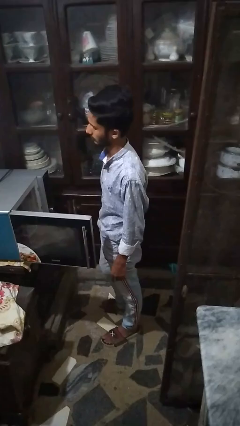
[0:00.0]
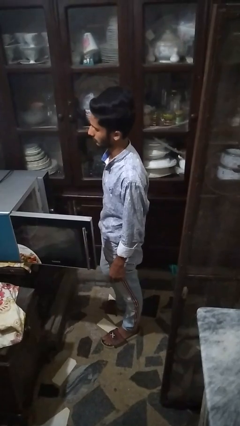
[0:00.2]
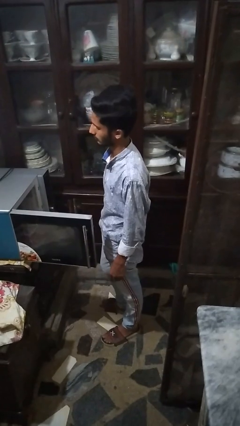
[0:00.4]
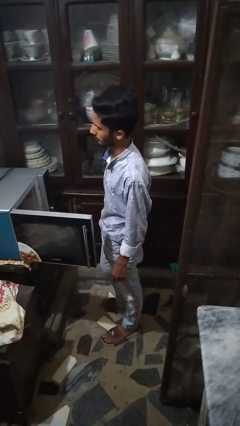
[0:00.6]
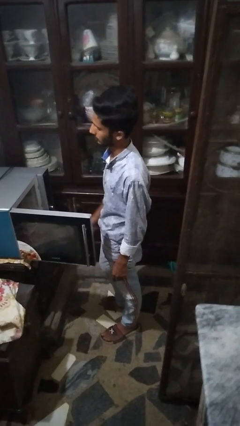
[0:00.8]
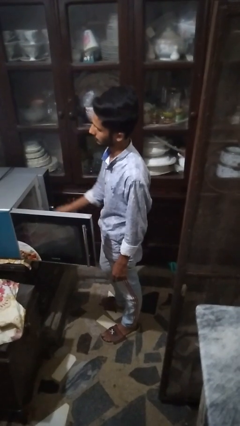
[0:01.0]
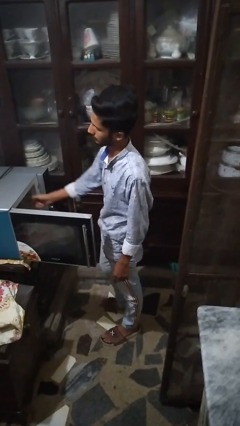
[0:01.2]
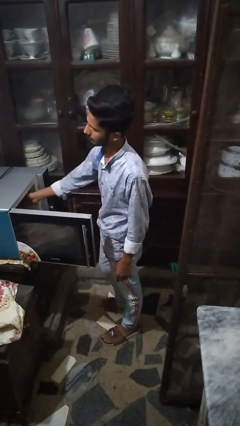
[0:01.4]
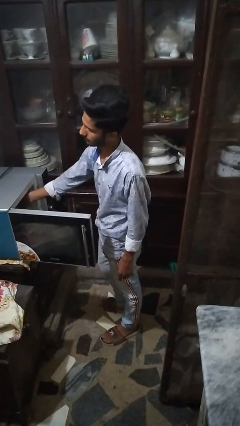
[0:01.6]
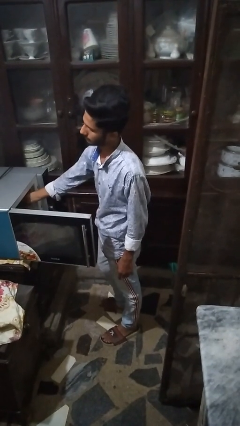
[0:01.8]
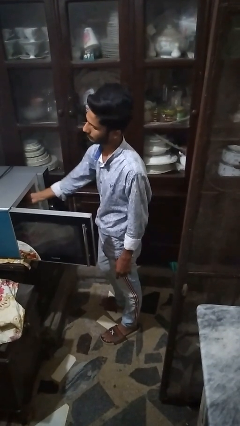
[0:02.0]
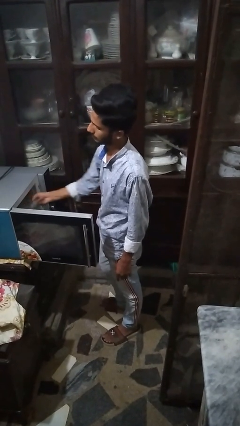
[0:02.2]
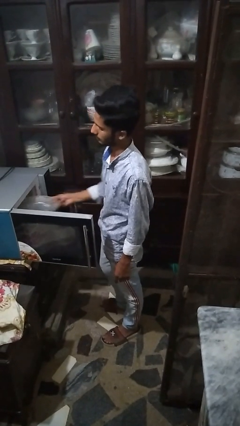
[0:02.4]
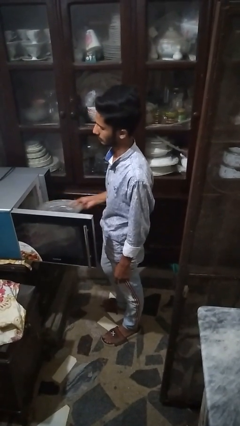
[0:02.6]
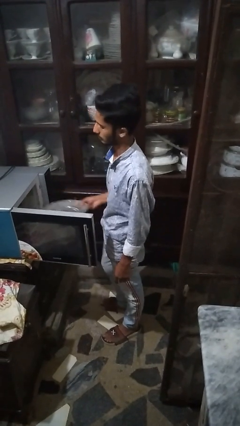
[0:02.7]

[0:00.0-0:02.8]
person takes object from microwave

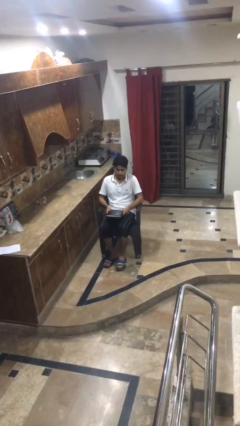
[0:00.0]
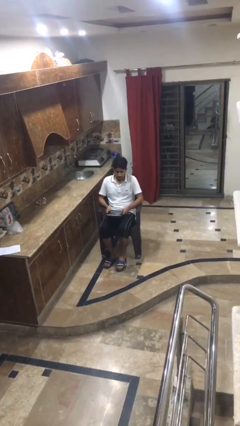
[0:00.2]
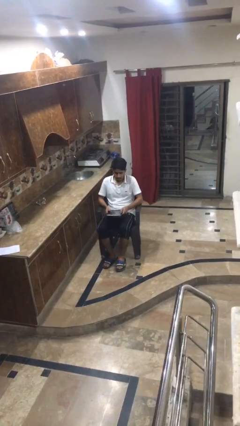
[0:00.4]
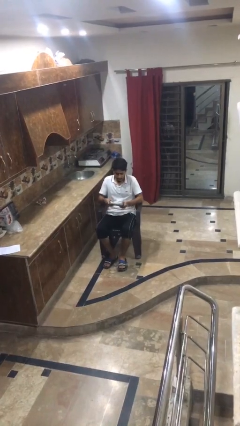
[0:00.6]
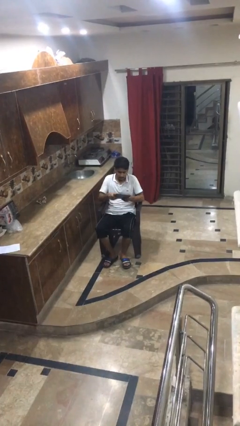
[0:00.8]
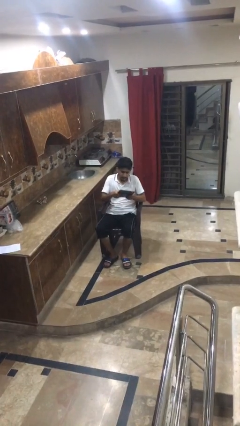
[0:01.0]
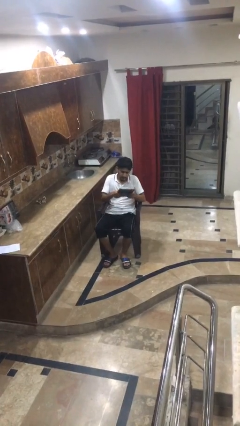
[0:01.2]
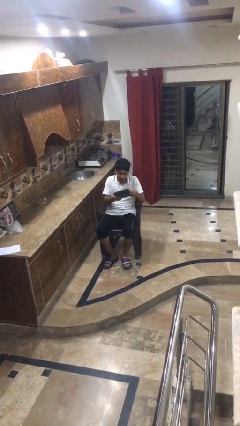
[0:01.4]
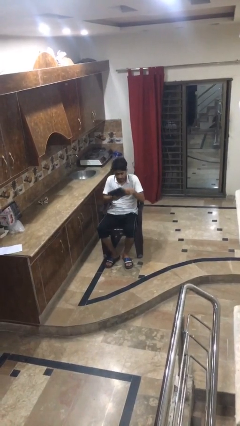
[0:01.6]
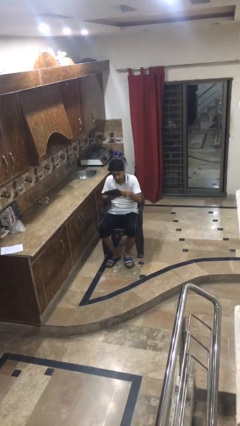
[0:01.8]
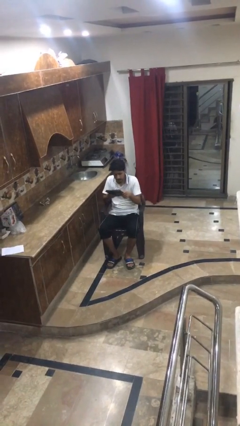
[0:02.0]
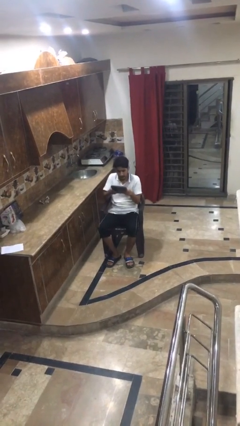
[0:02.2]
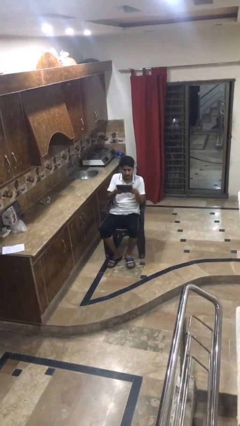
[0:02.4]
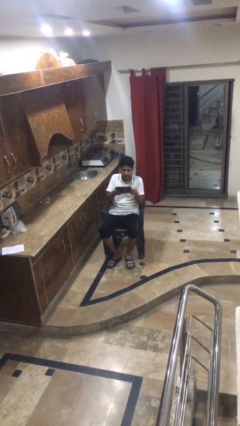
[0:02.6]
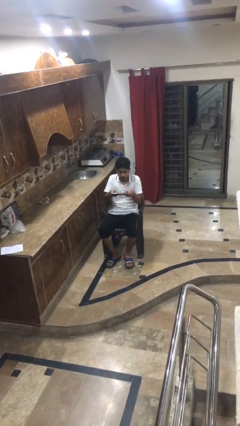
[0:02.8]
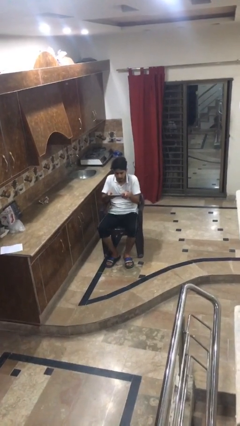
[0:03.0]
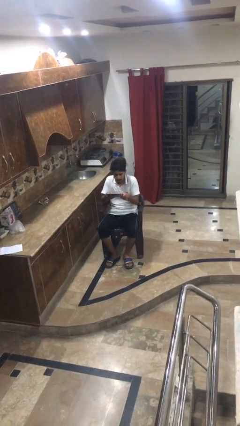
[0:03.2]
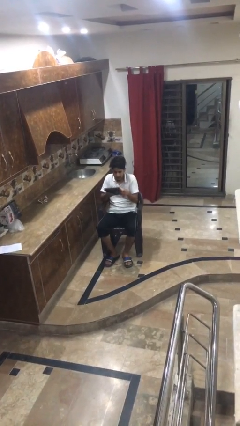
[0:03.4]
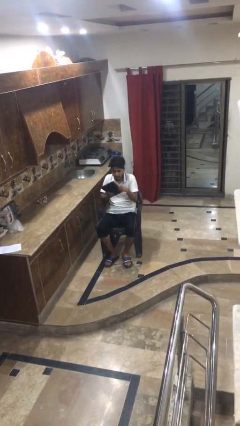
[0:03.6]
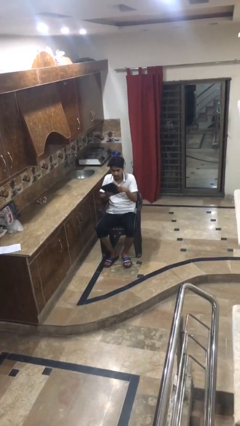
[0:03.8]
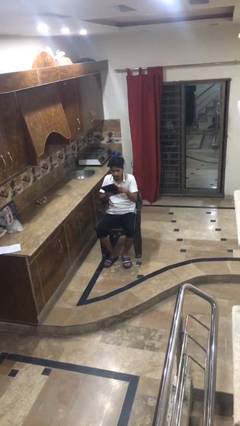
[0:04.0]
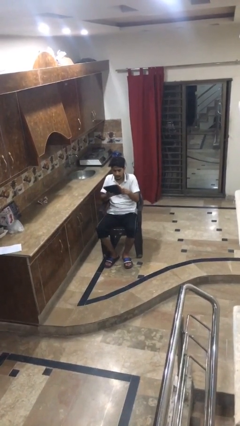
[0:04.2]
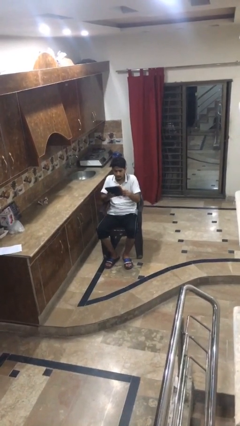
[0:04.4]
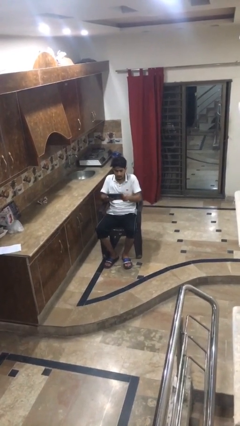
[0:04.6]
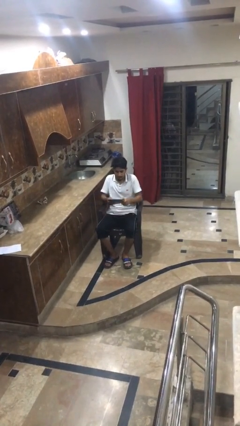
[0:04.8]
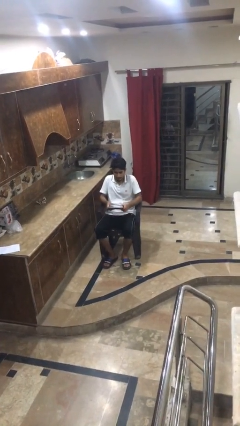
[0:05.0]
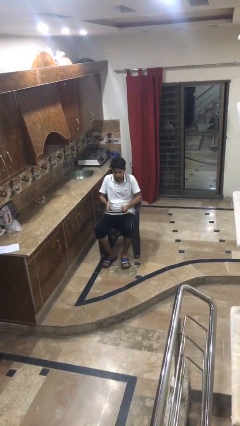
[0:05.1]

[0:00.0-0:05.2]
person interacts with handheld game

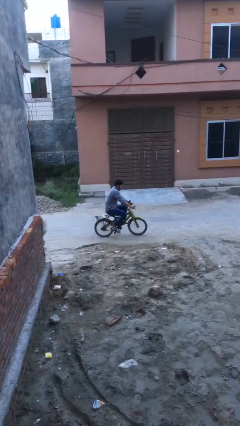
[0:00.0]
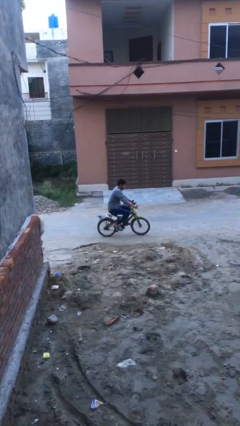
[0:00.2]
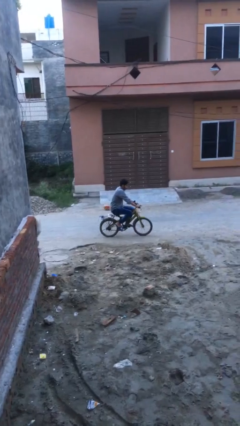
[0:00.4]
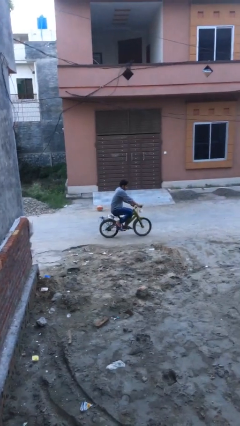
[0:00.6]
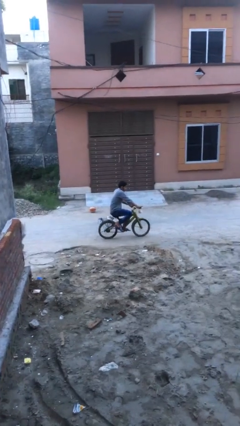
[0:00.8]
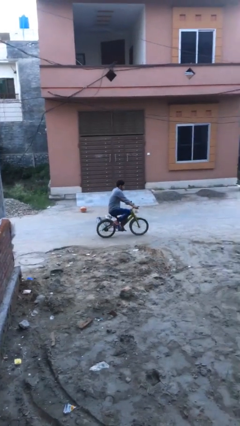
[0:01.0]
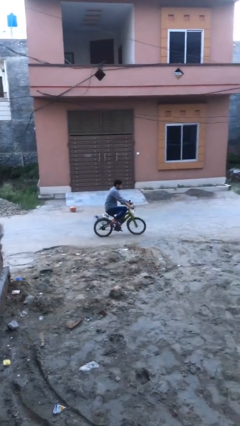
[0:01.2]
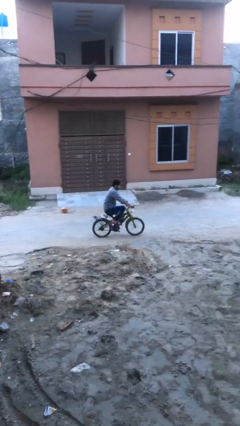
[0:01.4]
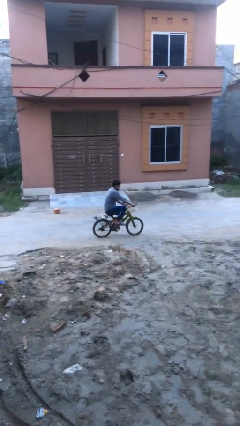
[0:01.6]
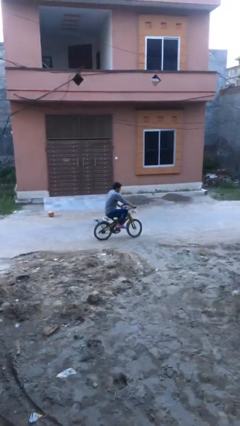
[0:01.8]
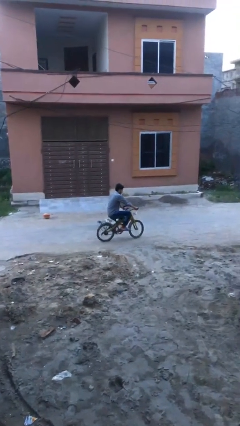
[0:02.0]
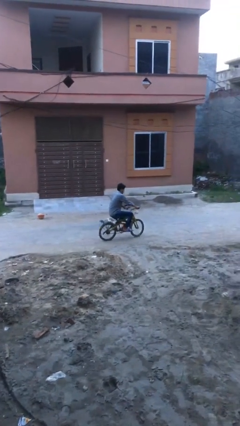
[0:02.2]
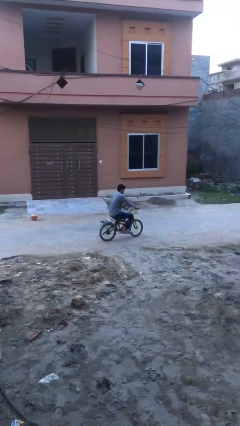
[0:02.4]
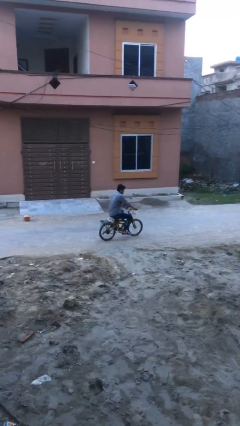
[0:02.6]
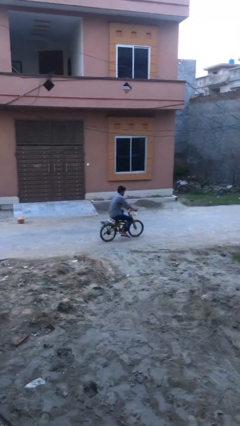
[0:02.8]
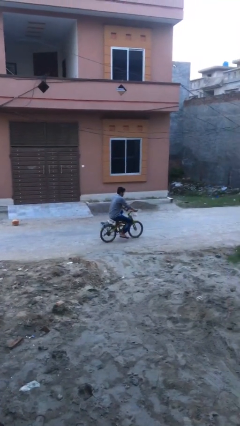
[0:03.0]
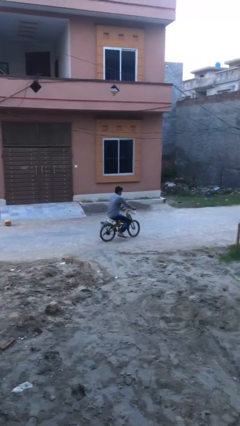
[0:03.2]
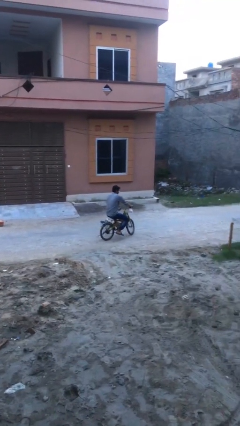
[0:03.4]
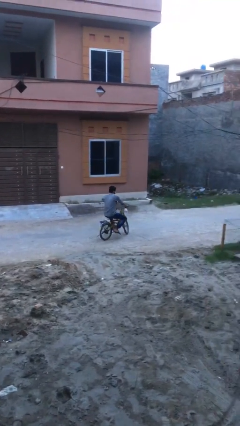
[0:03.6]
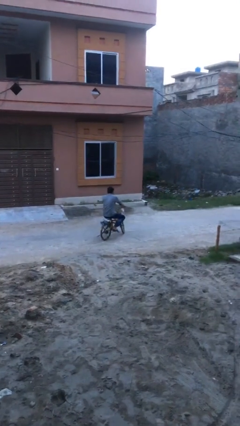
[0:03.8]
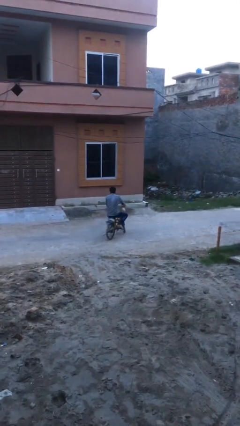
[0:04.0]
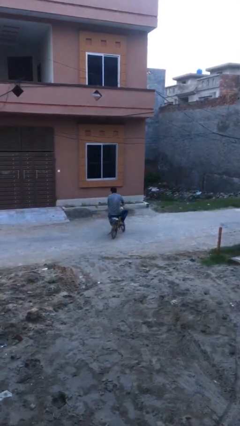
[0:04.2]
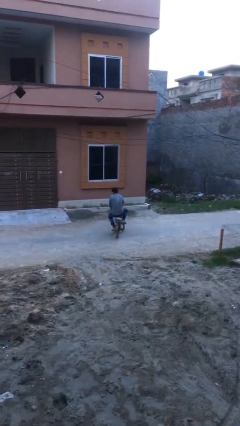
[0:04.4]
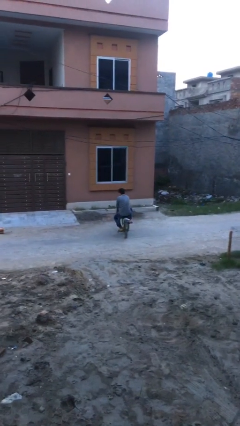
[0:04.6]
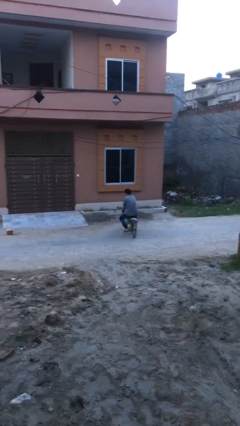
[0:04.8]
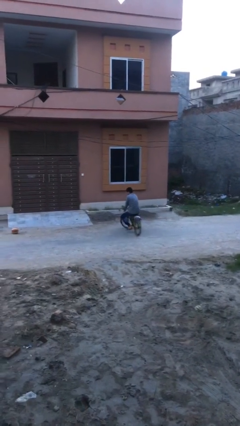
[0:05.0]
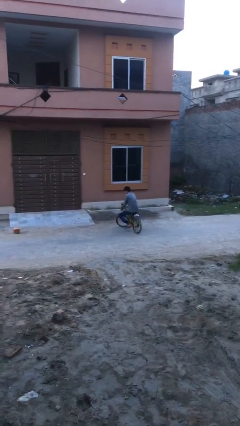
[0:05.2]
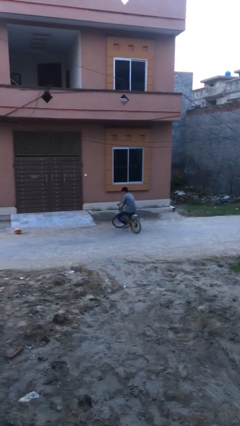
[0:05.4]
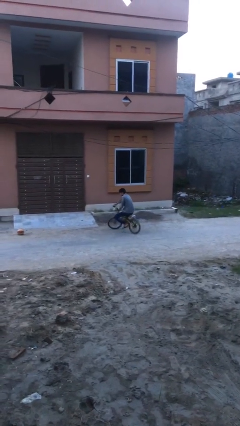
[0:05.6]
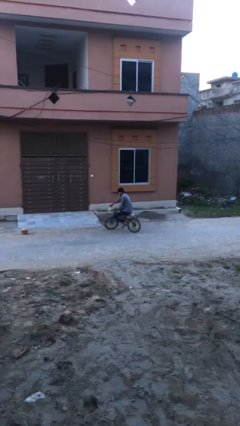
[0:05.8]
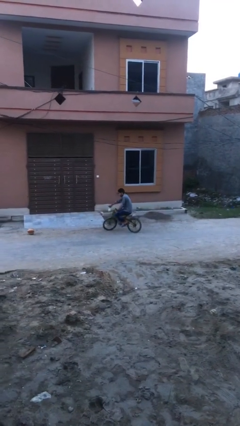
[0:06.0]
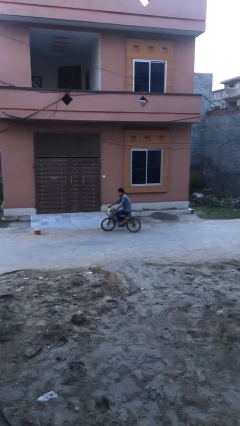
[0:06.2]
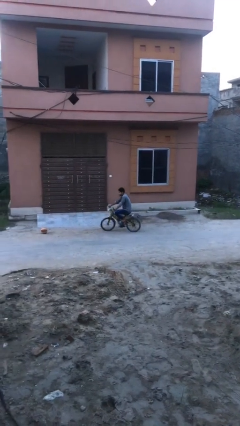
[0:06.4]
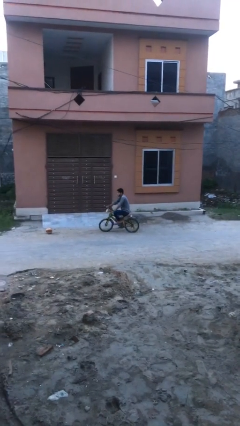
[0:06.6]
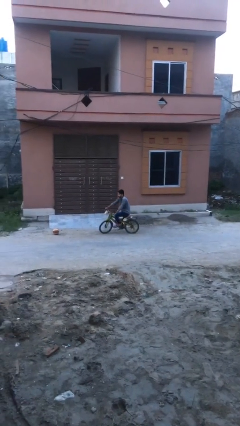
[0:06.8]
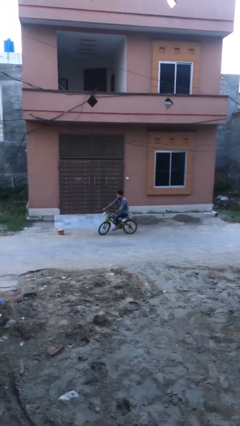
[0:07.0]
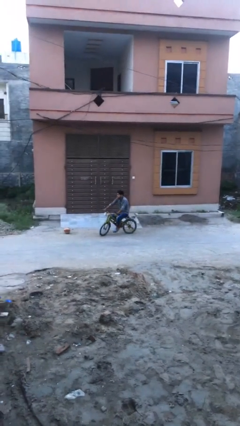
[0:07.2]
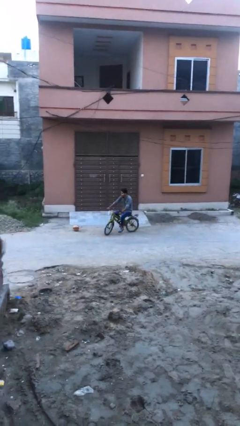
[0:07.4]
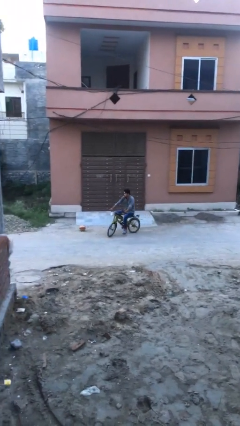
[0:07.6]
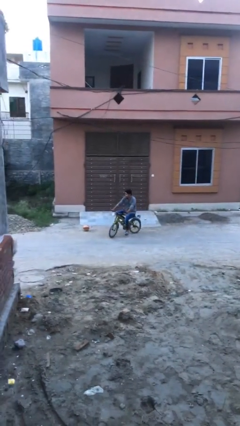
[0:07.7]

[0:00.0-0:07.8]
person rides bicycle

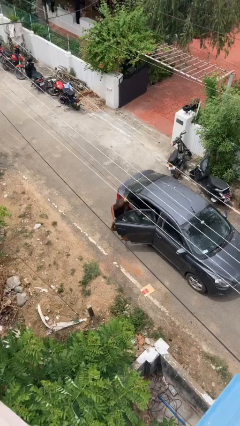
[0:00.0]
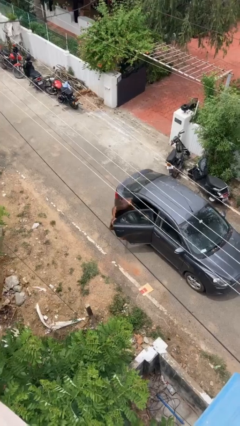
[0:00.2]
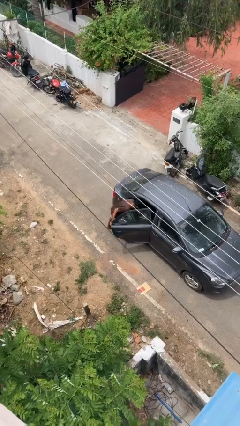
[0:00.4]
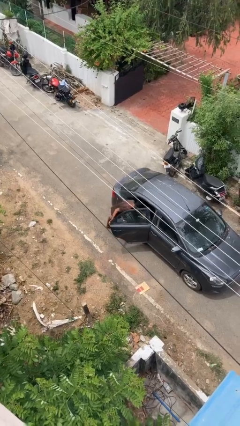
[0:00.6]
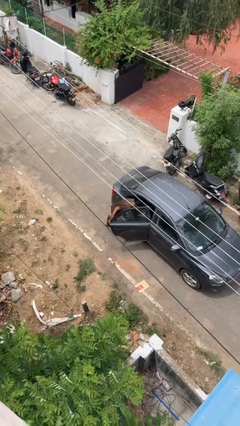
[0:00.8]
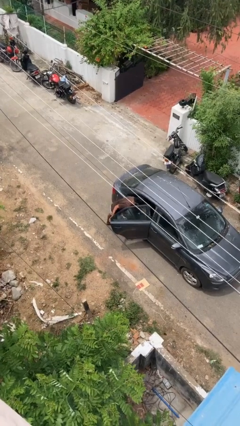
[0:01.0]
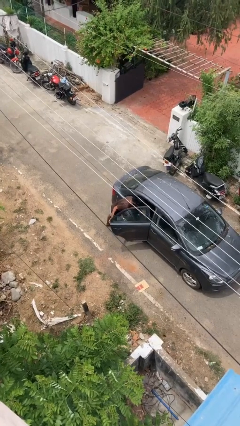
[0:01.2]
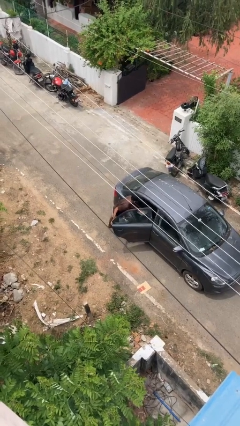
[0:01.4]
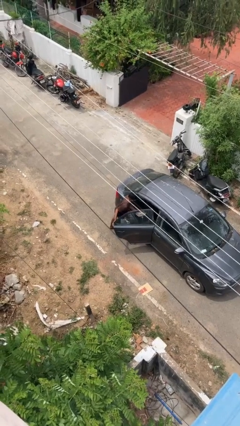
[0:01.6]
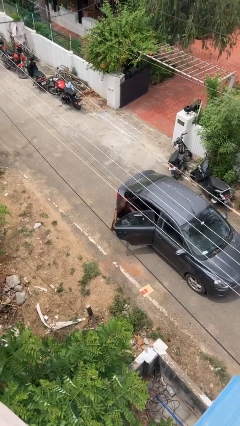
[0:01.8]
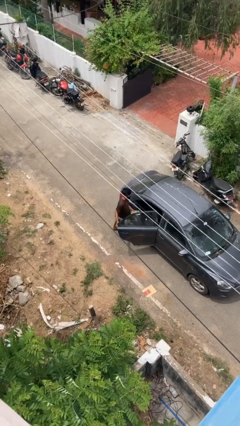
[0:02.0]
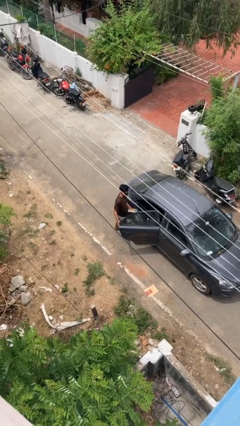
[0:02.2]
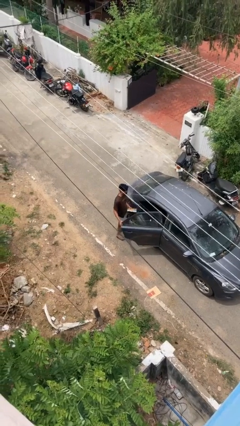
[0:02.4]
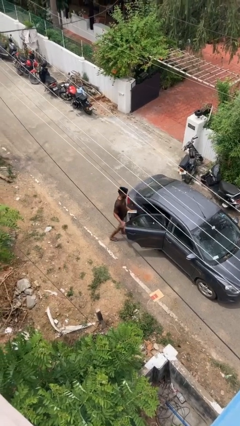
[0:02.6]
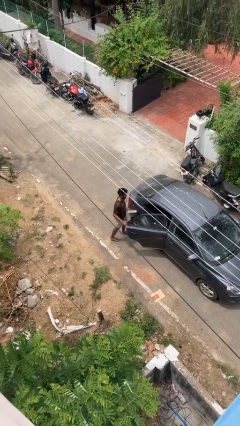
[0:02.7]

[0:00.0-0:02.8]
person unloads car
